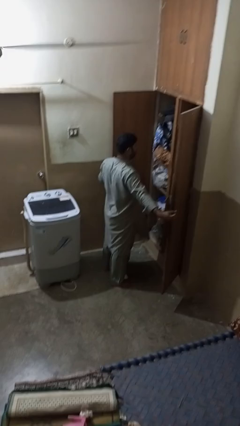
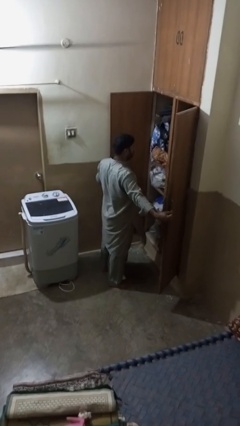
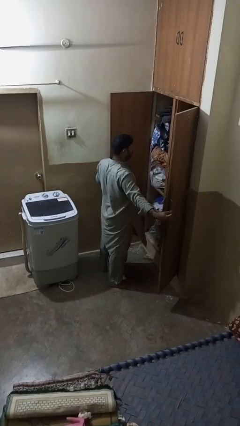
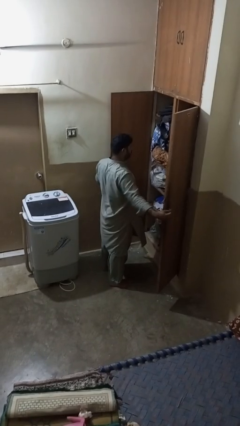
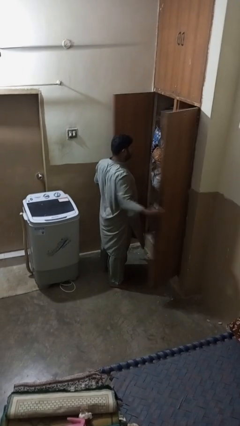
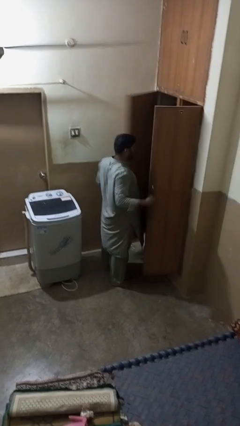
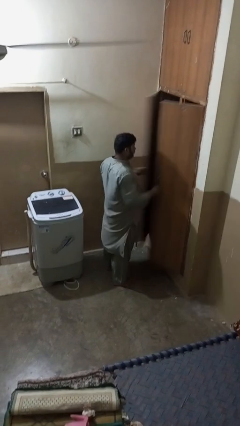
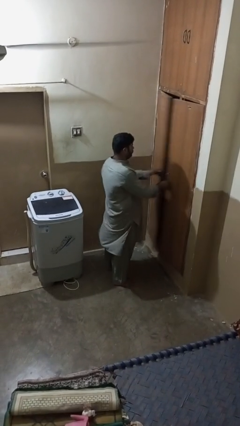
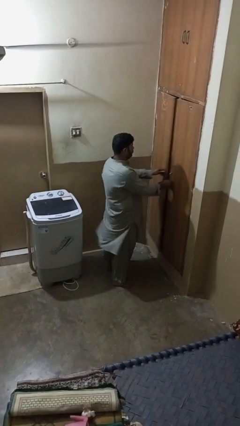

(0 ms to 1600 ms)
person closes closet door

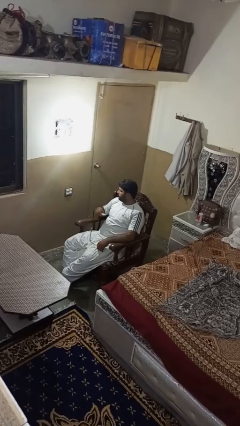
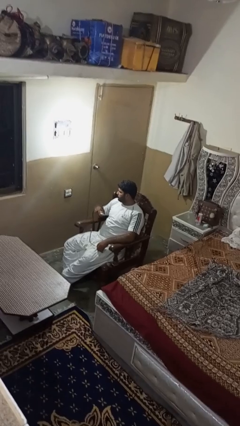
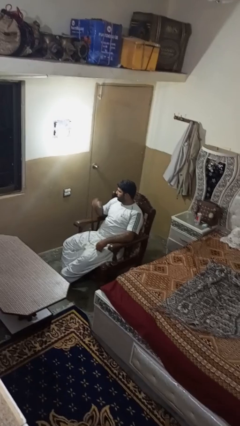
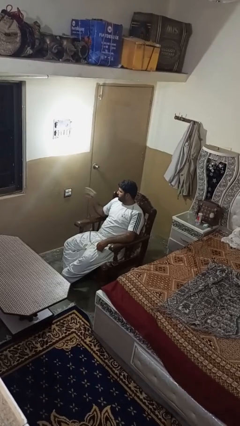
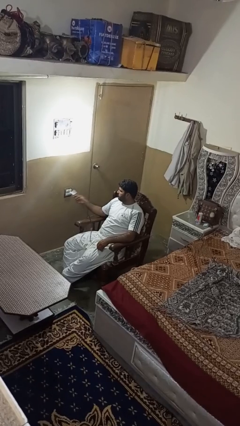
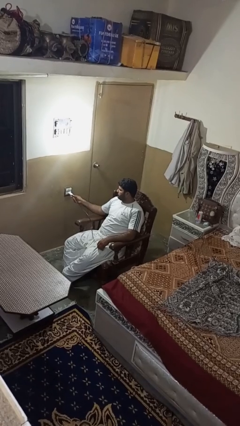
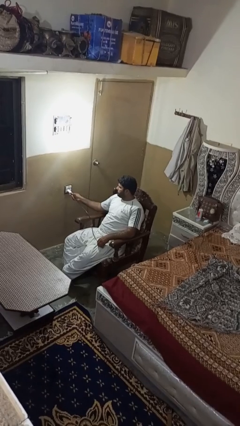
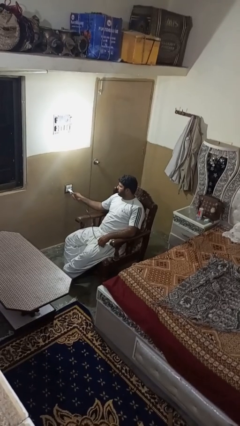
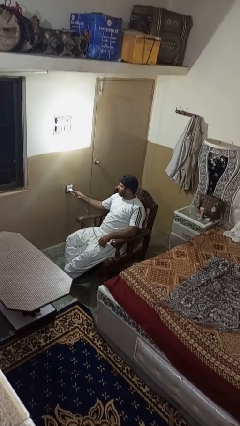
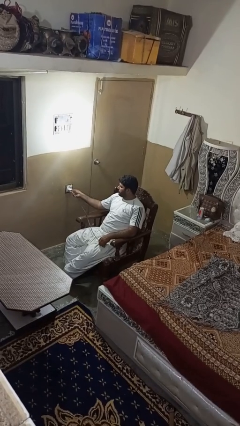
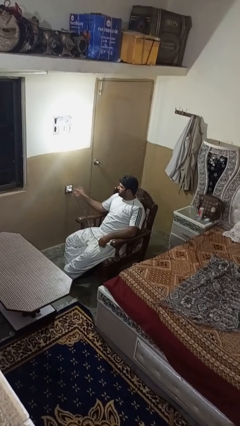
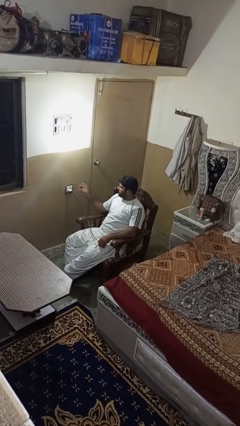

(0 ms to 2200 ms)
person plugs into electrical socket

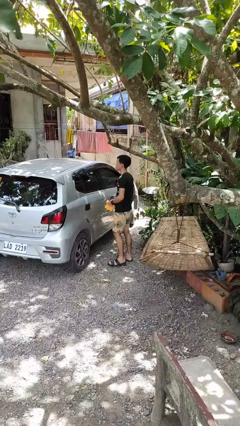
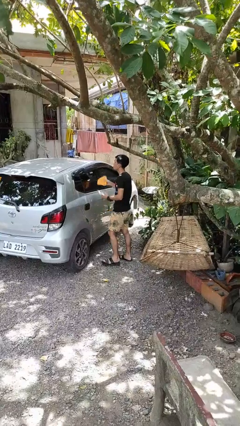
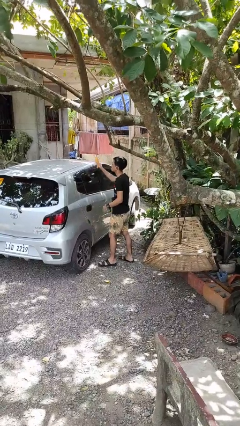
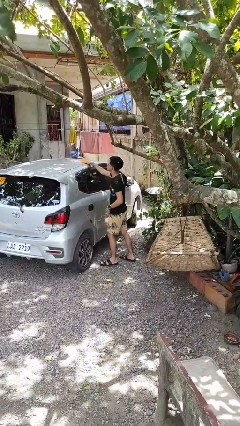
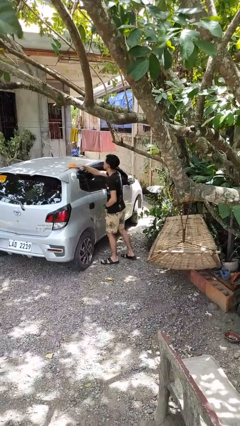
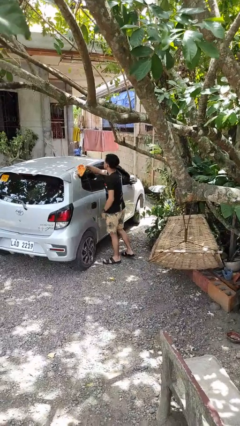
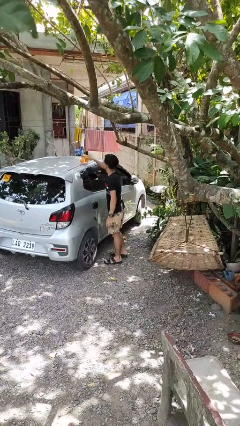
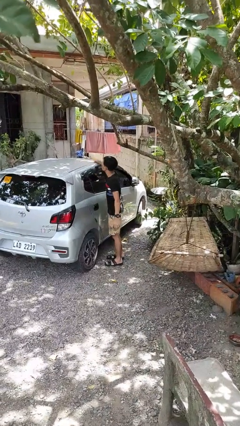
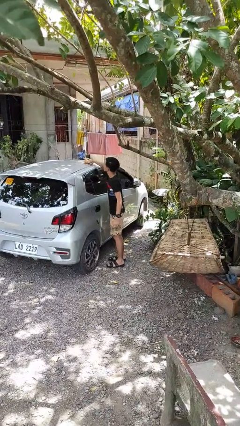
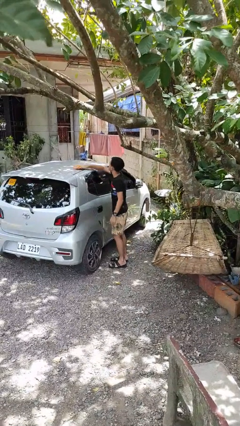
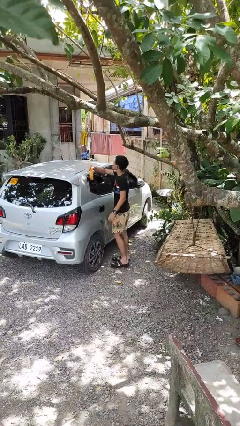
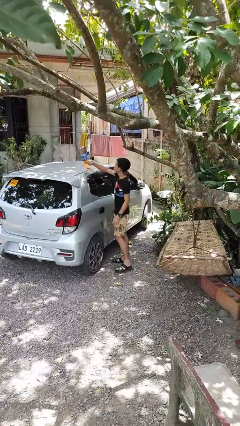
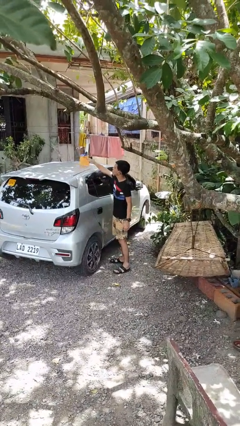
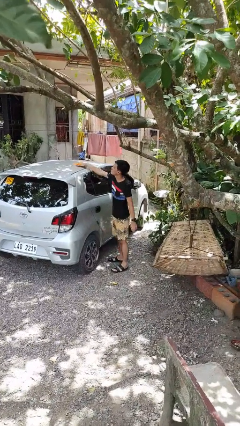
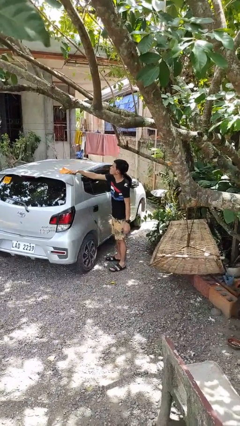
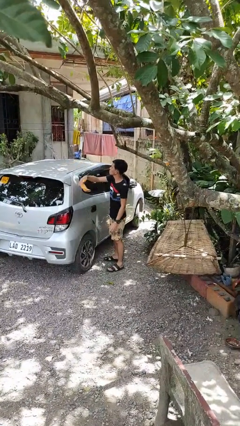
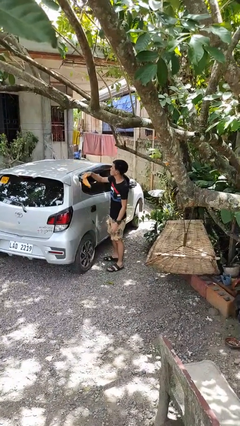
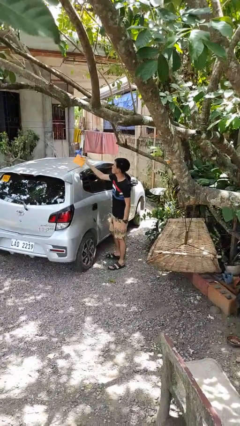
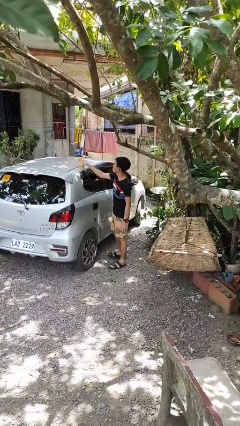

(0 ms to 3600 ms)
person polishes car with rag

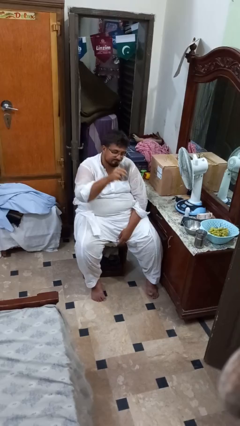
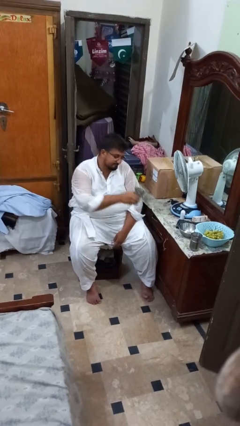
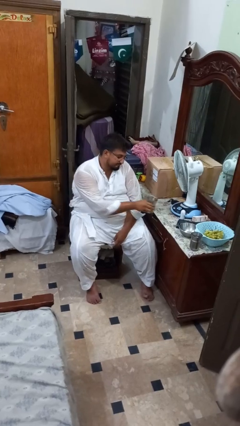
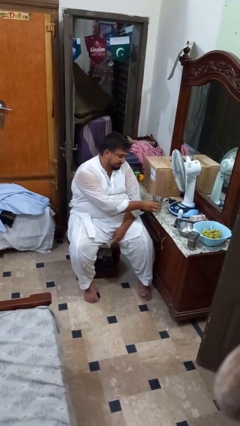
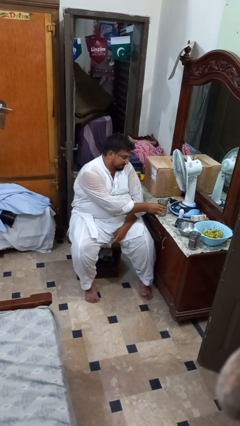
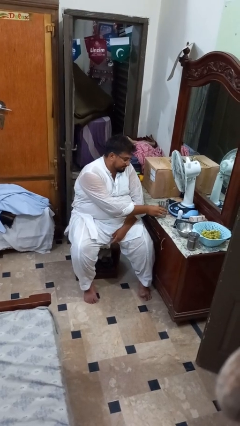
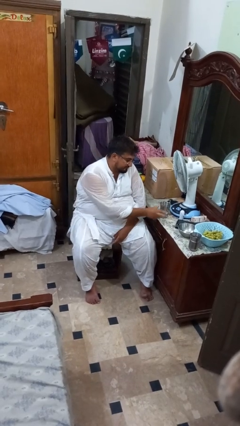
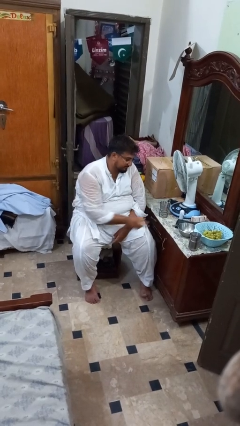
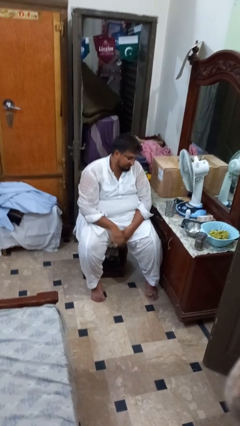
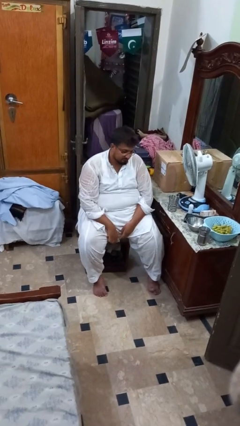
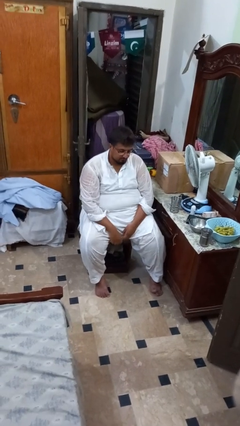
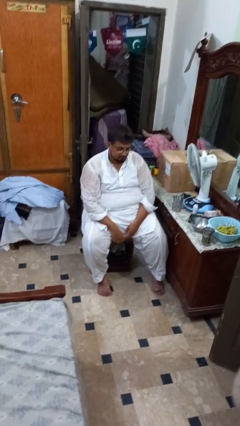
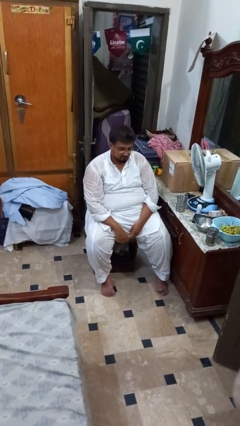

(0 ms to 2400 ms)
person puts down object on table

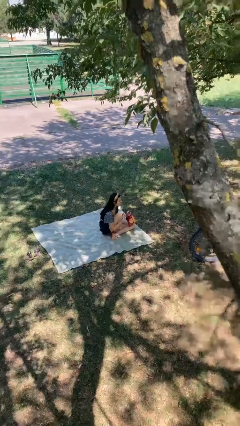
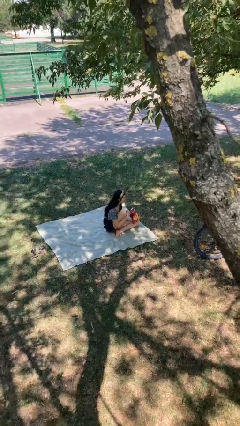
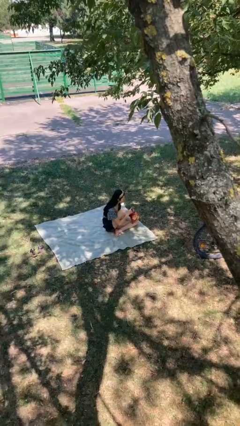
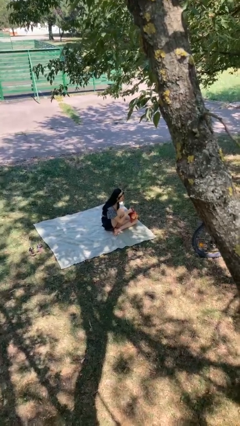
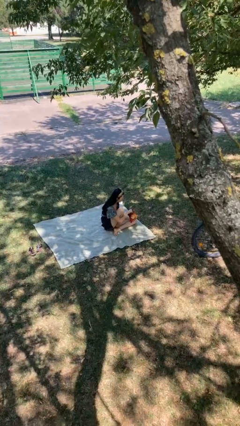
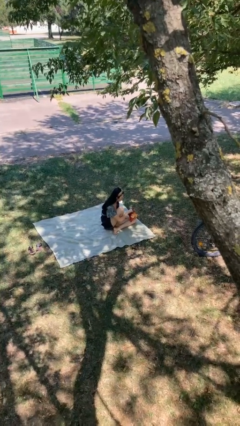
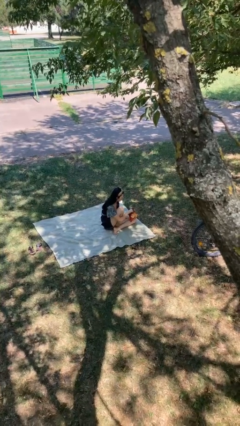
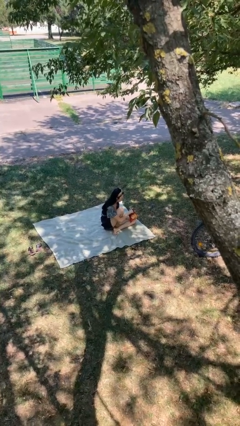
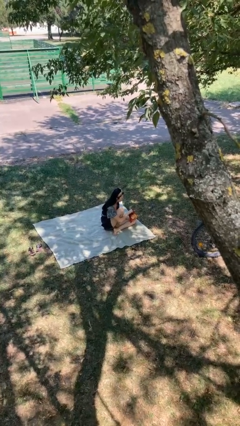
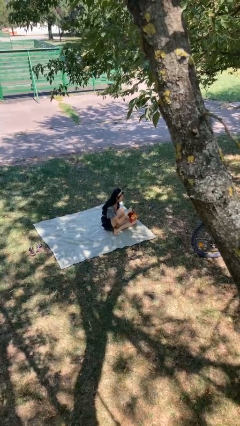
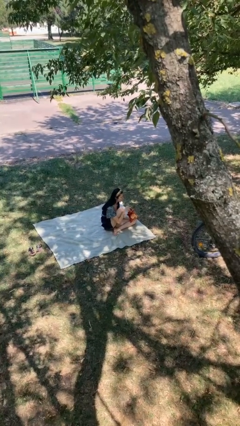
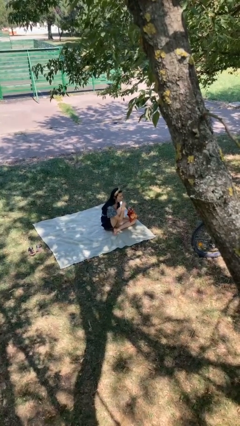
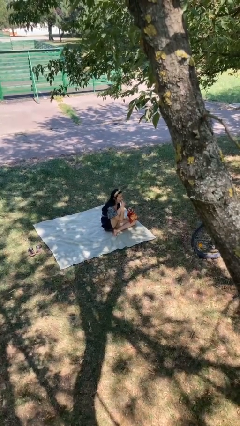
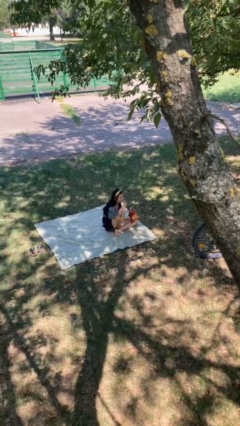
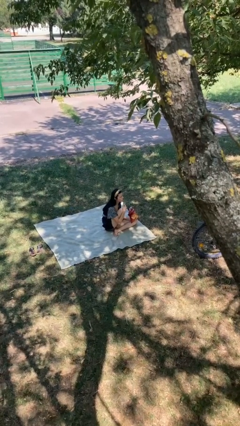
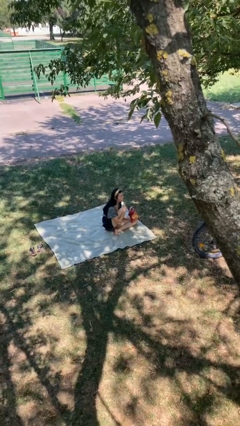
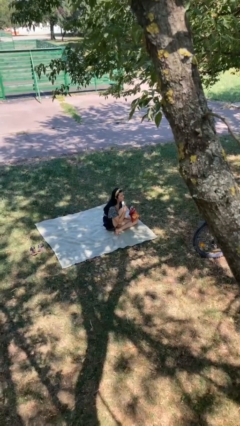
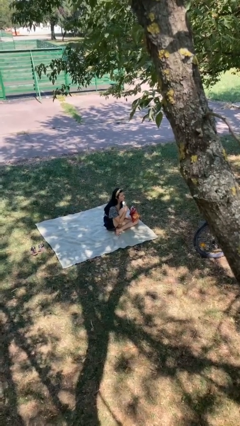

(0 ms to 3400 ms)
person eats snack from bag

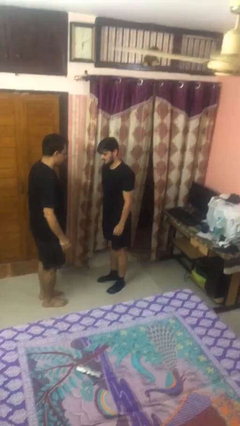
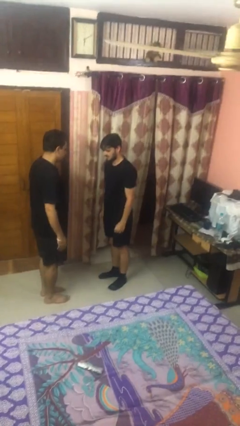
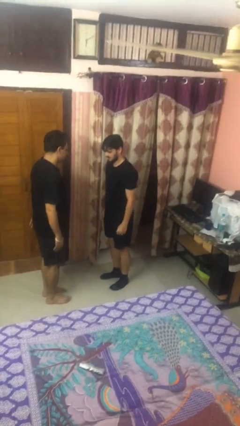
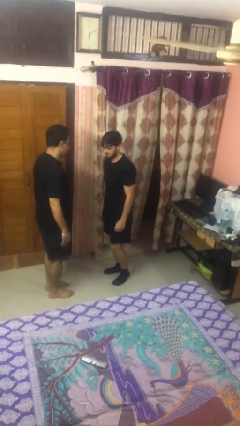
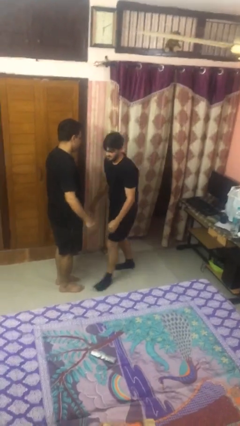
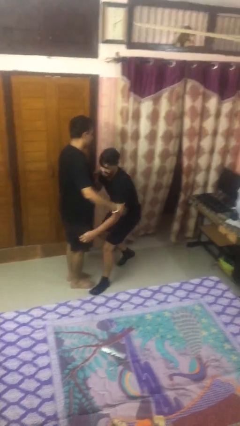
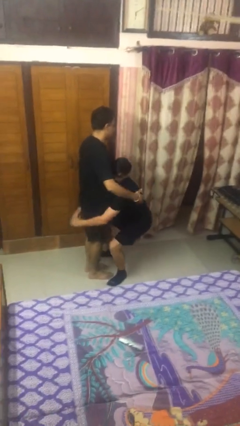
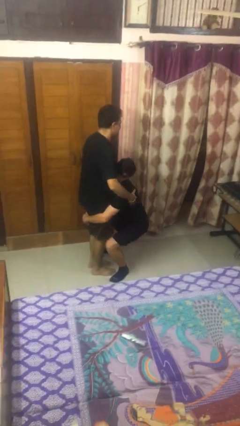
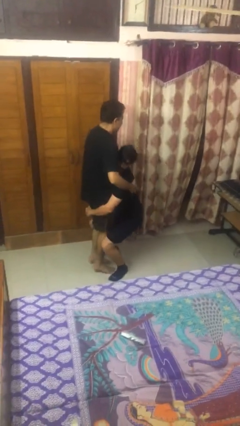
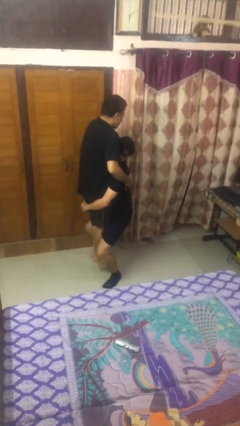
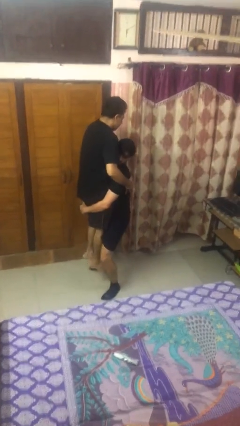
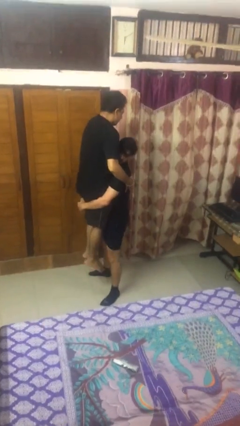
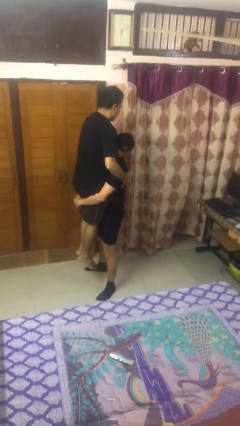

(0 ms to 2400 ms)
person picks up person

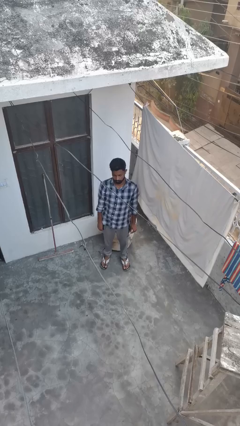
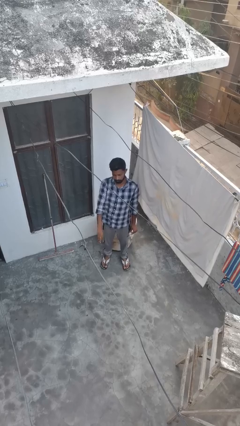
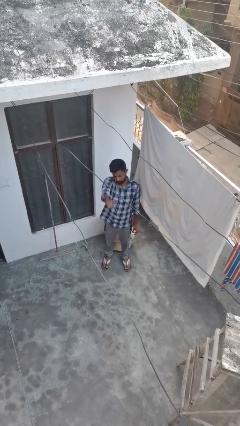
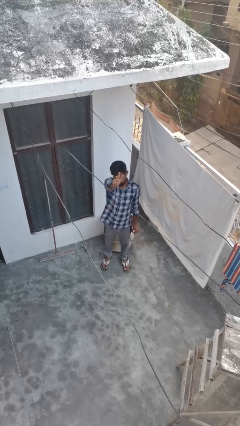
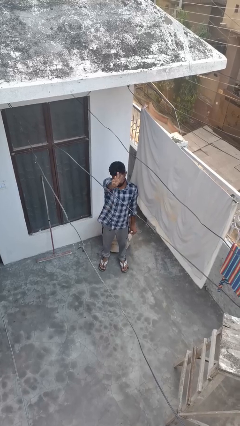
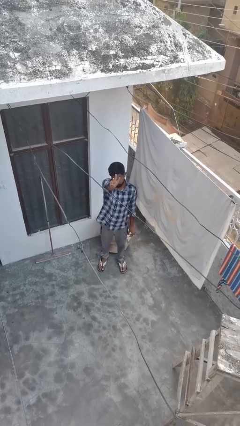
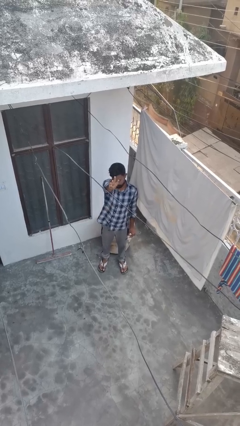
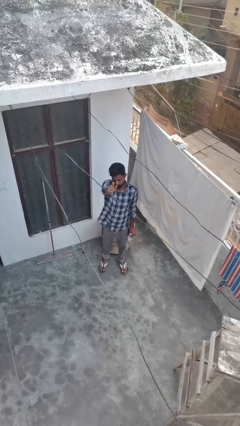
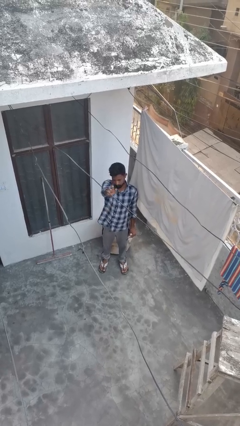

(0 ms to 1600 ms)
person gestures number three
